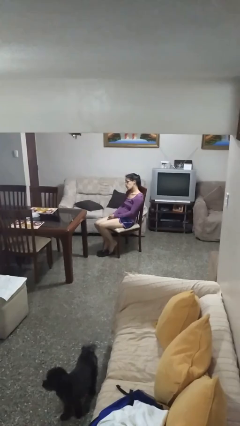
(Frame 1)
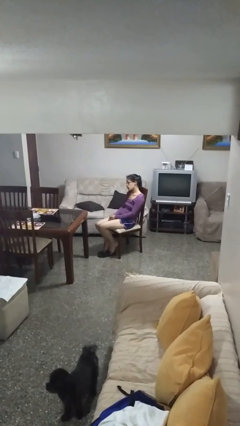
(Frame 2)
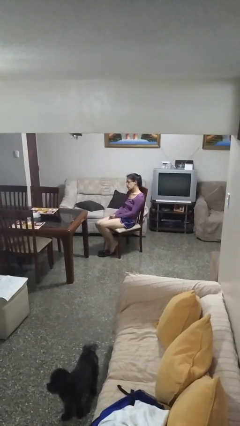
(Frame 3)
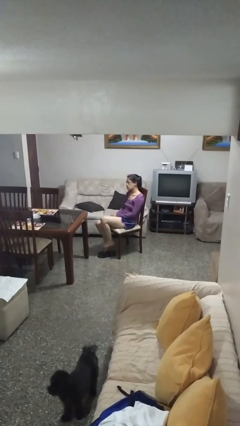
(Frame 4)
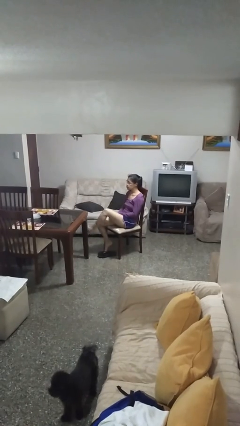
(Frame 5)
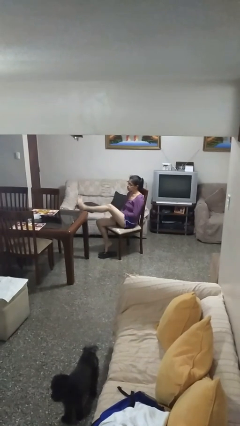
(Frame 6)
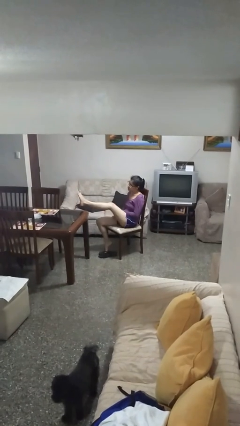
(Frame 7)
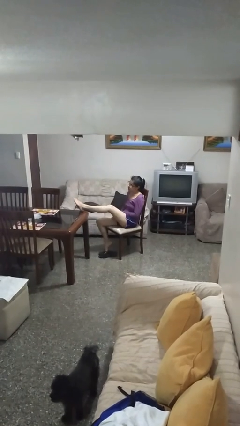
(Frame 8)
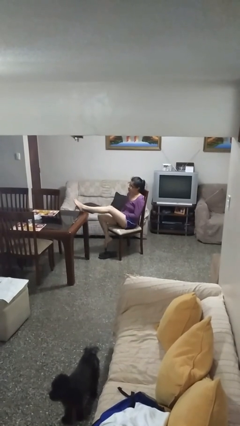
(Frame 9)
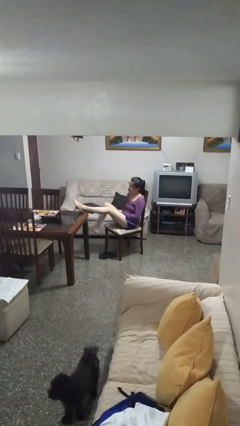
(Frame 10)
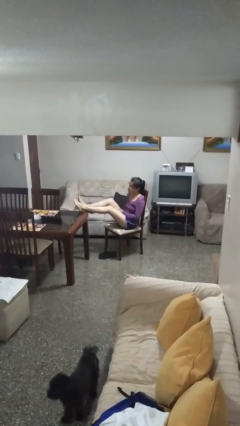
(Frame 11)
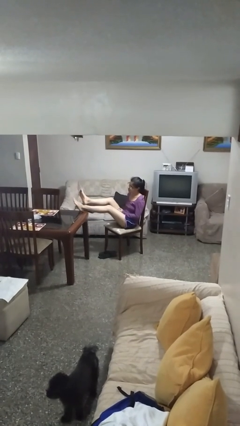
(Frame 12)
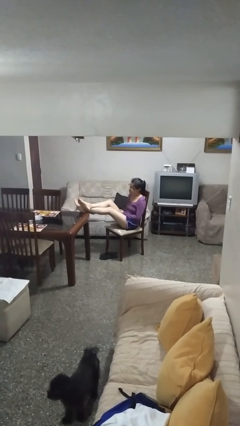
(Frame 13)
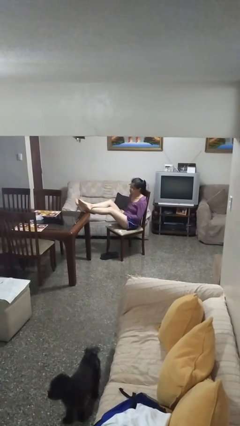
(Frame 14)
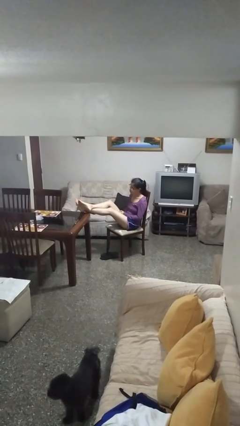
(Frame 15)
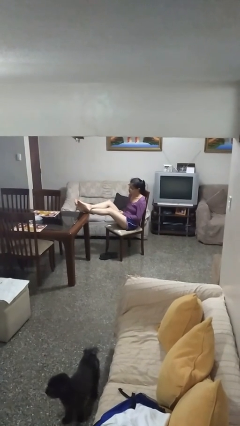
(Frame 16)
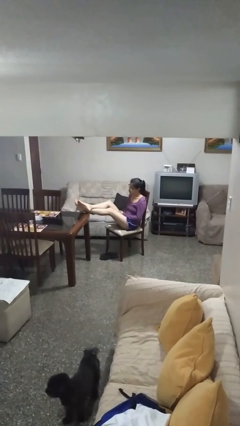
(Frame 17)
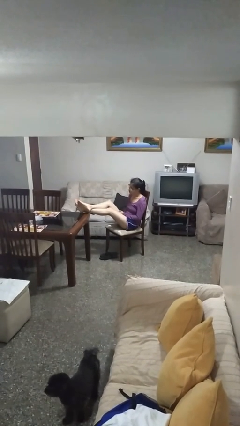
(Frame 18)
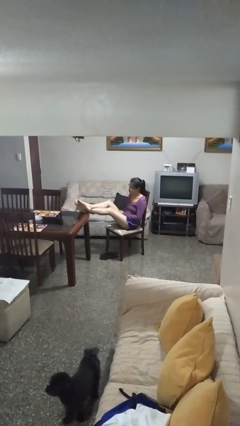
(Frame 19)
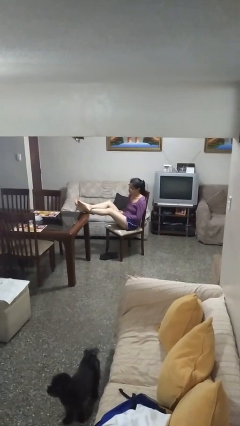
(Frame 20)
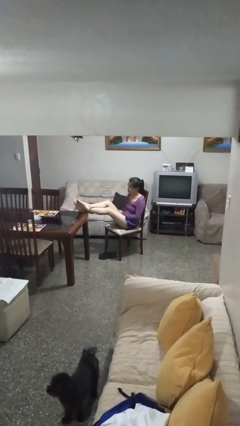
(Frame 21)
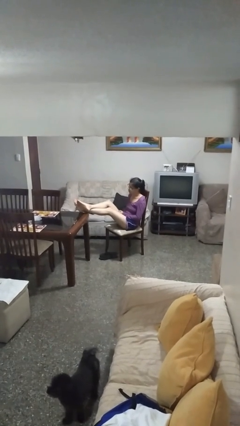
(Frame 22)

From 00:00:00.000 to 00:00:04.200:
person puts feet up

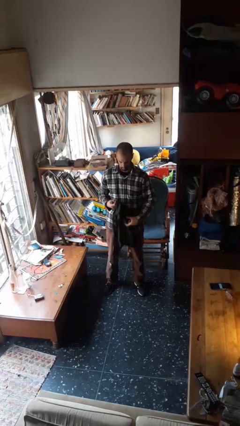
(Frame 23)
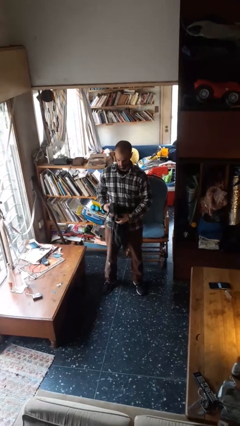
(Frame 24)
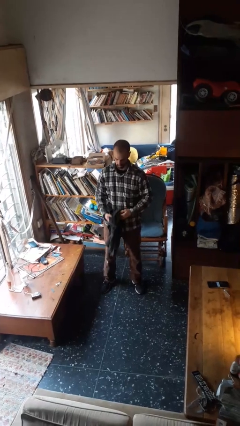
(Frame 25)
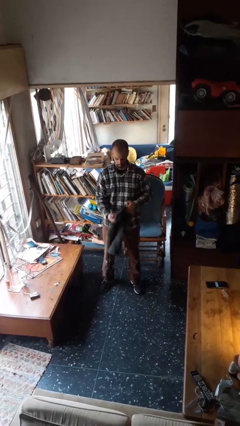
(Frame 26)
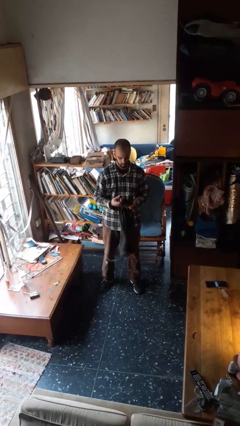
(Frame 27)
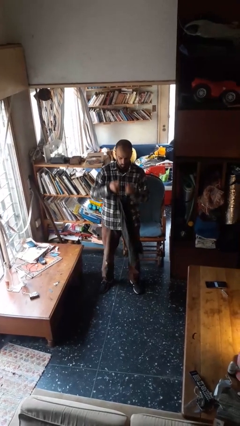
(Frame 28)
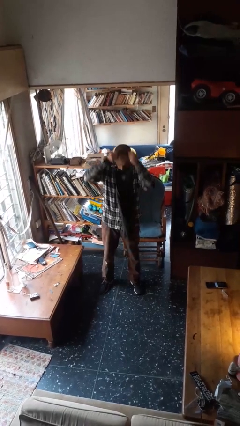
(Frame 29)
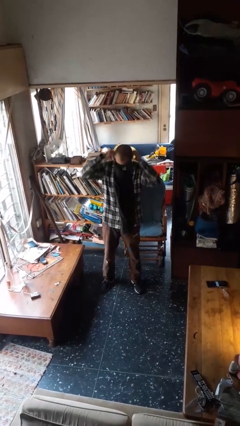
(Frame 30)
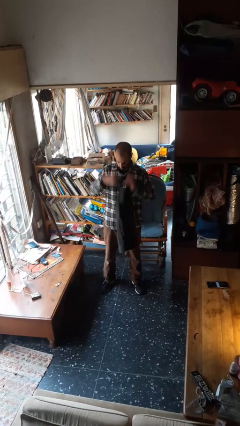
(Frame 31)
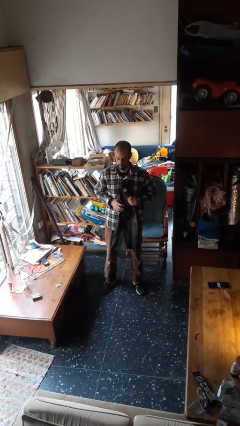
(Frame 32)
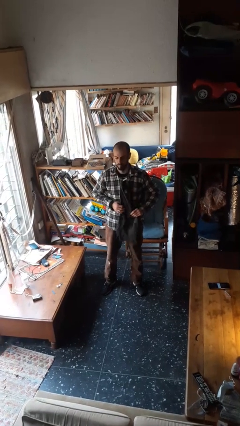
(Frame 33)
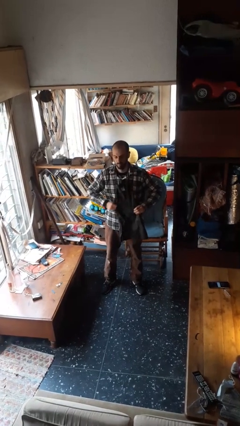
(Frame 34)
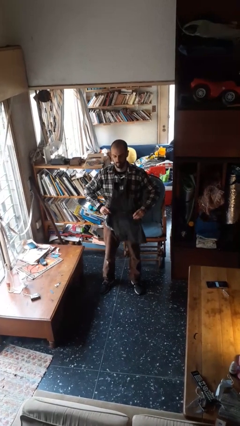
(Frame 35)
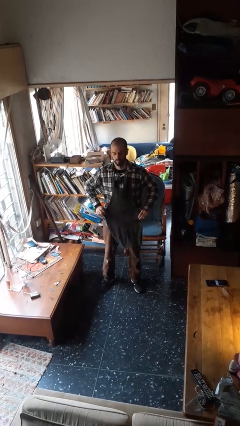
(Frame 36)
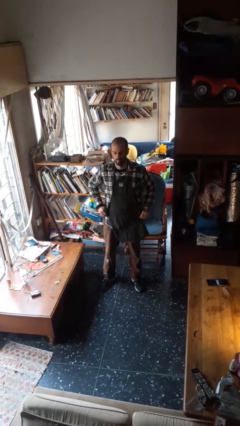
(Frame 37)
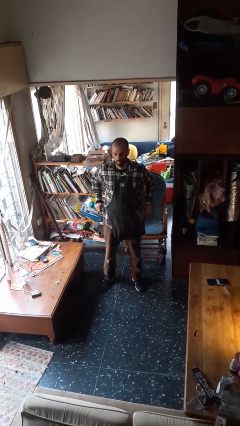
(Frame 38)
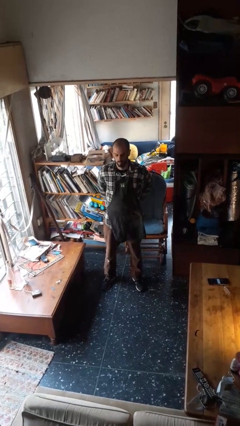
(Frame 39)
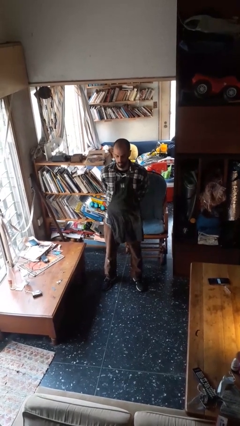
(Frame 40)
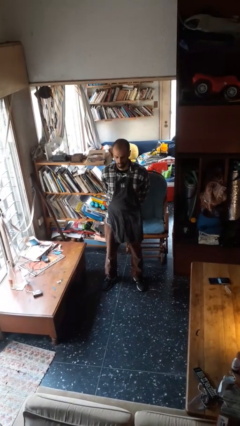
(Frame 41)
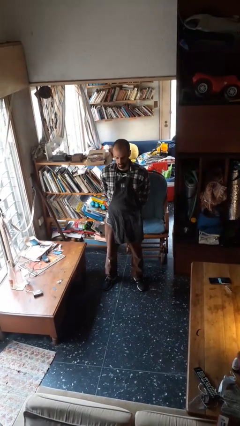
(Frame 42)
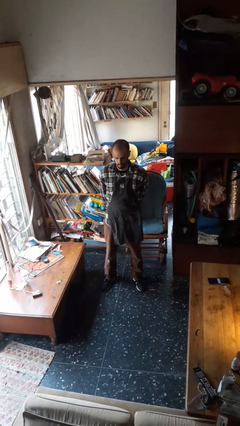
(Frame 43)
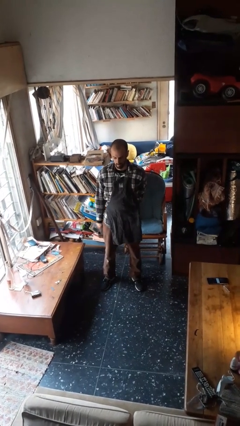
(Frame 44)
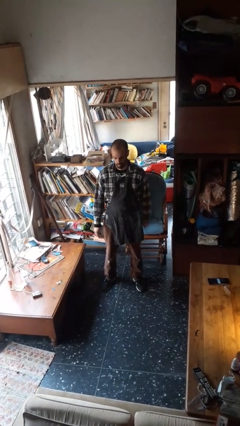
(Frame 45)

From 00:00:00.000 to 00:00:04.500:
person puts on apron

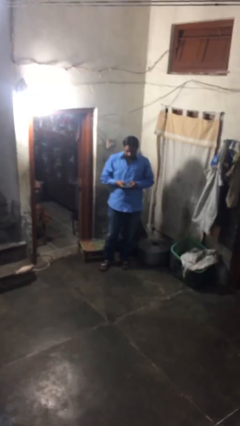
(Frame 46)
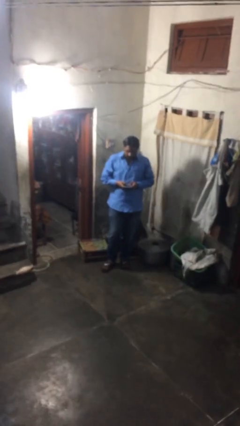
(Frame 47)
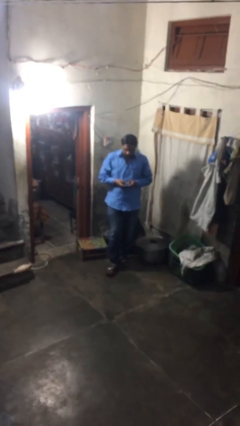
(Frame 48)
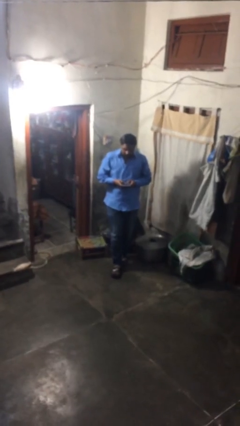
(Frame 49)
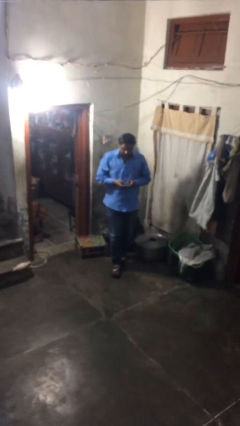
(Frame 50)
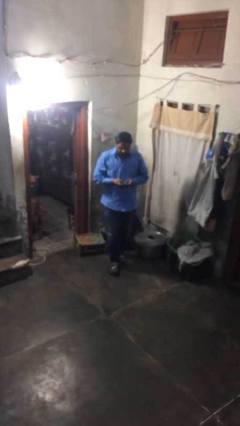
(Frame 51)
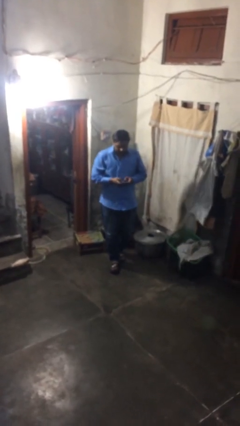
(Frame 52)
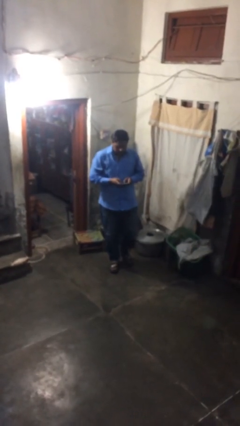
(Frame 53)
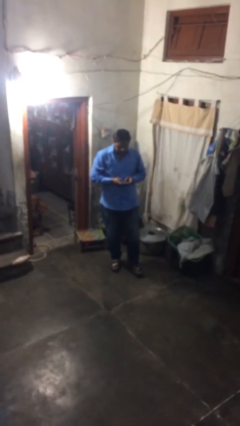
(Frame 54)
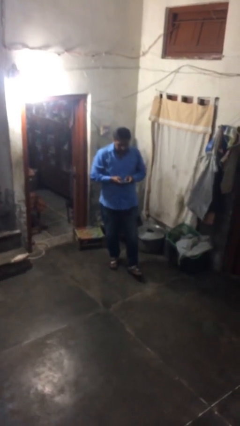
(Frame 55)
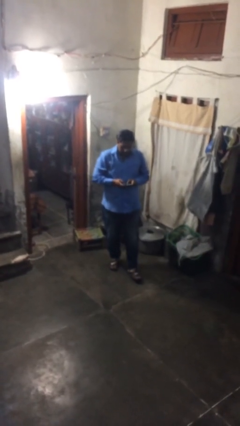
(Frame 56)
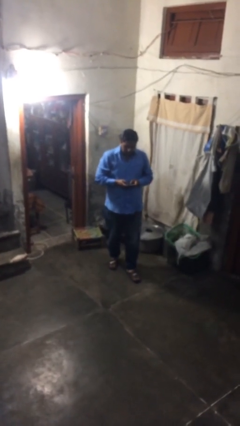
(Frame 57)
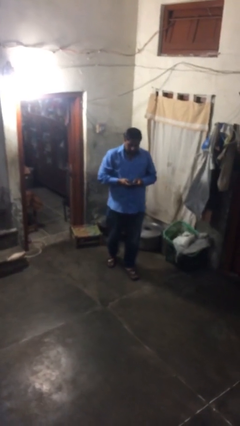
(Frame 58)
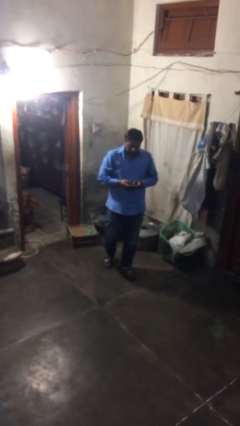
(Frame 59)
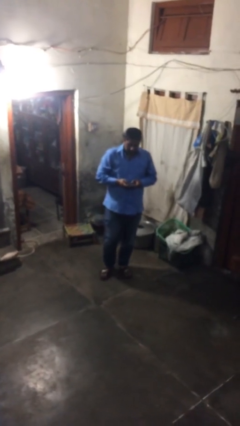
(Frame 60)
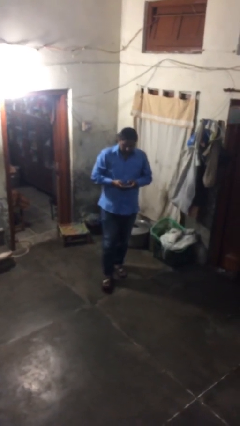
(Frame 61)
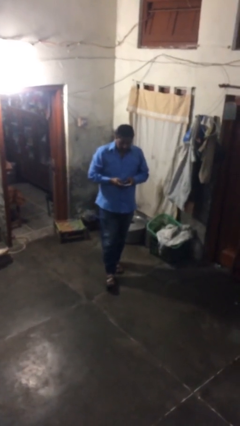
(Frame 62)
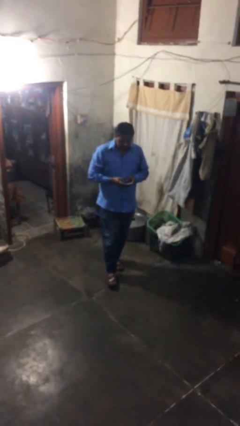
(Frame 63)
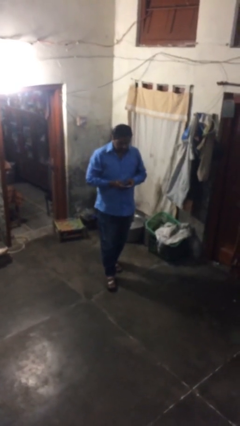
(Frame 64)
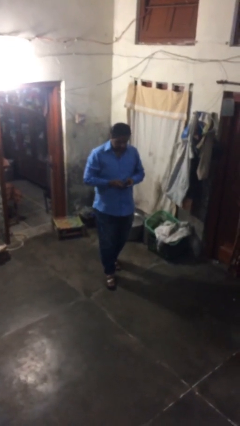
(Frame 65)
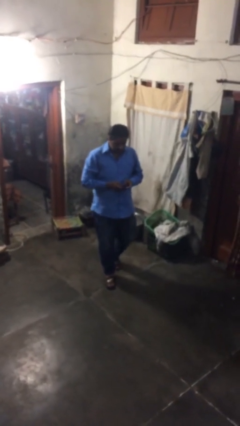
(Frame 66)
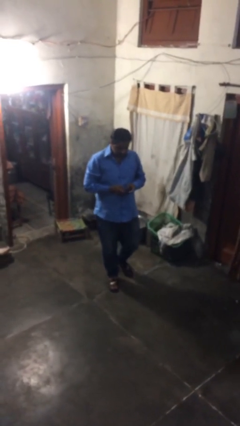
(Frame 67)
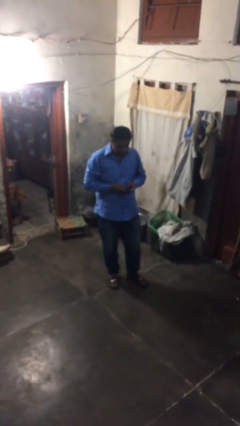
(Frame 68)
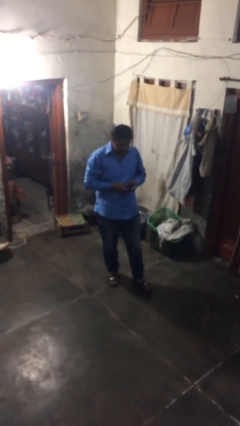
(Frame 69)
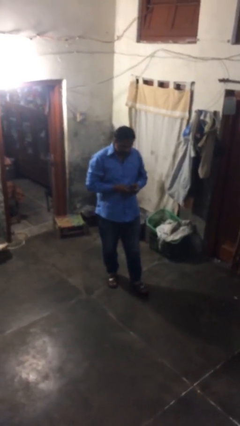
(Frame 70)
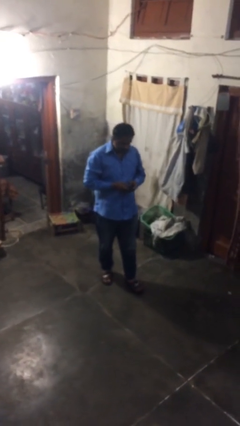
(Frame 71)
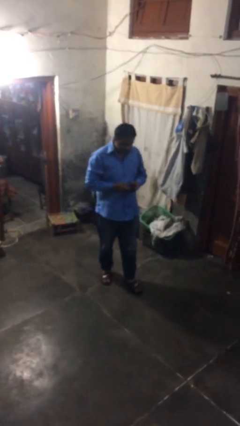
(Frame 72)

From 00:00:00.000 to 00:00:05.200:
person texts on phone

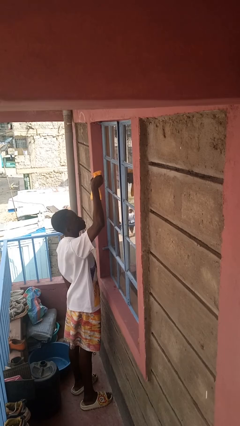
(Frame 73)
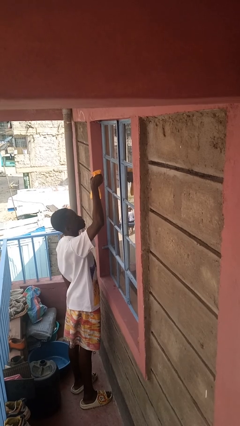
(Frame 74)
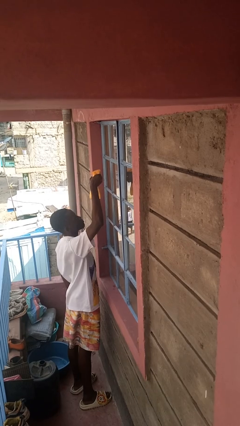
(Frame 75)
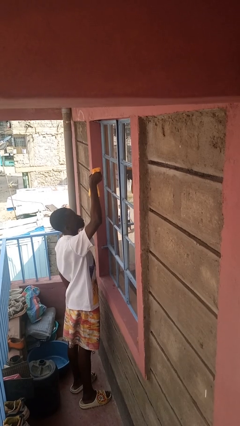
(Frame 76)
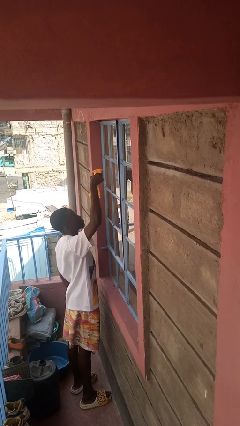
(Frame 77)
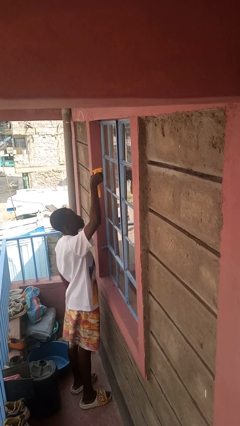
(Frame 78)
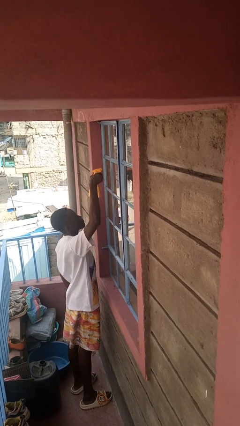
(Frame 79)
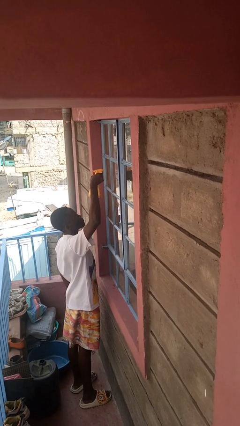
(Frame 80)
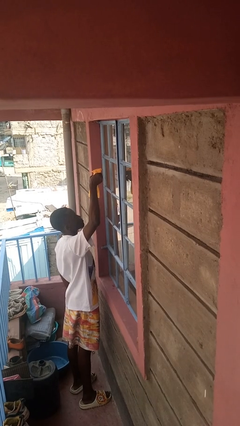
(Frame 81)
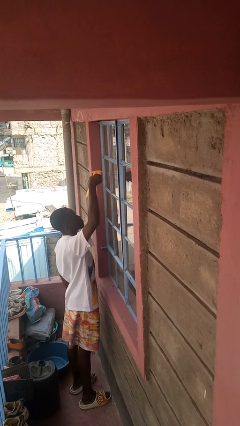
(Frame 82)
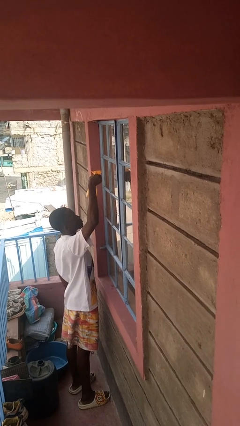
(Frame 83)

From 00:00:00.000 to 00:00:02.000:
person sprays from bottle

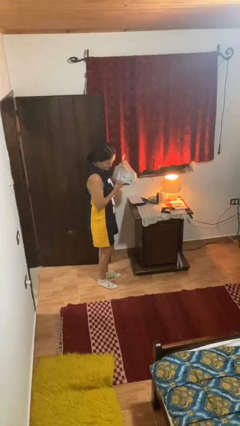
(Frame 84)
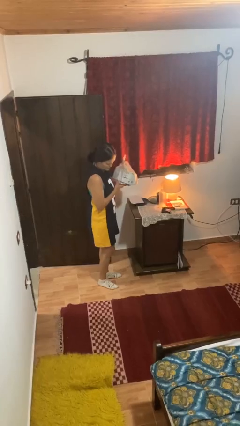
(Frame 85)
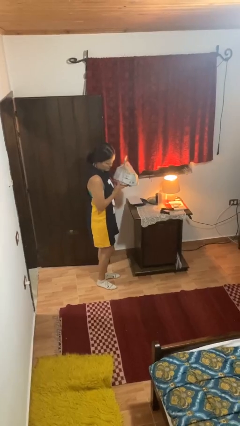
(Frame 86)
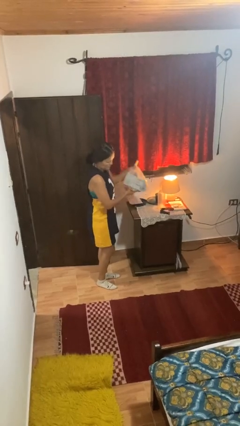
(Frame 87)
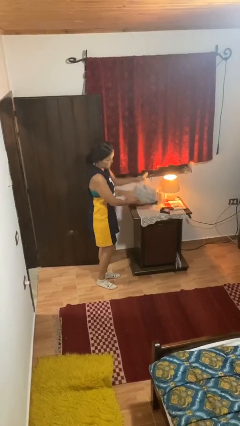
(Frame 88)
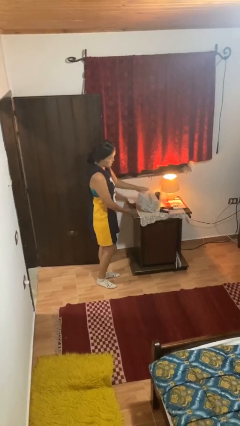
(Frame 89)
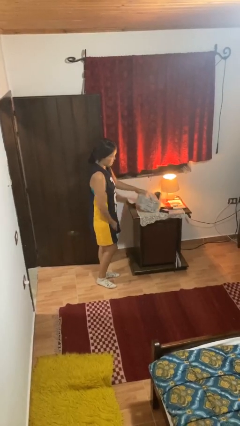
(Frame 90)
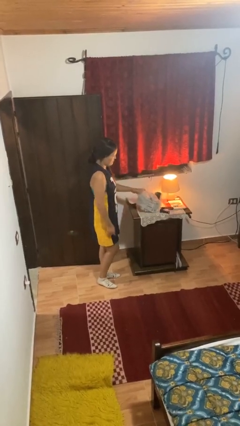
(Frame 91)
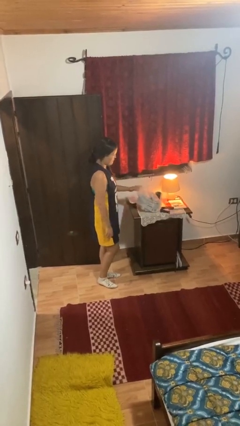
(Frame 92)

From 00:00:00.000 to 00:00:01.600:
person puts down object on countertop
